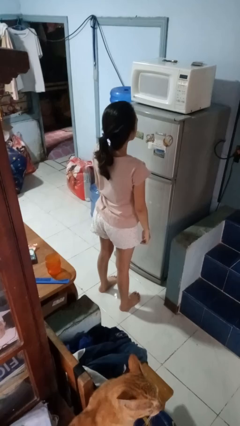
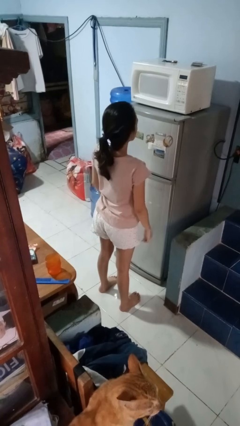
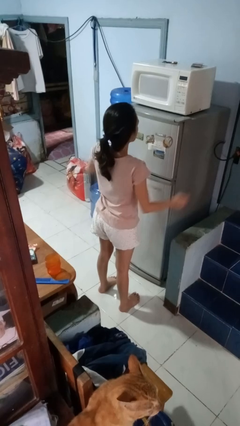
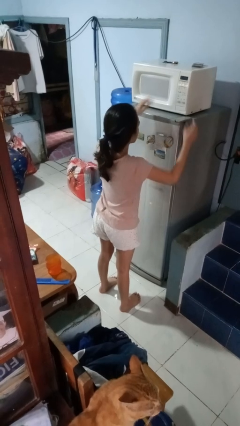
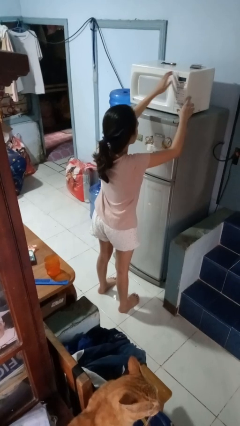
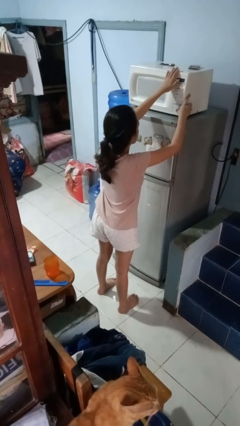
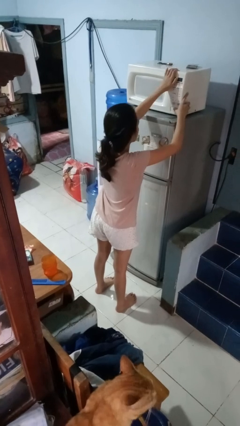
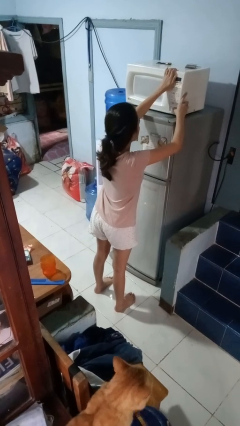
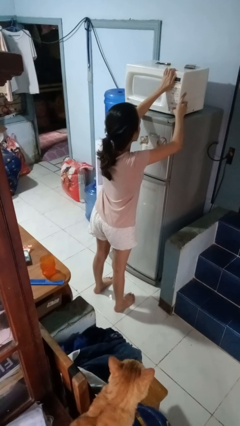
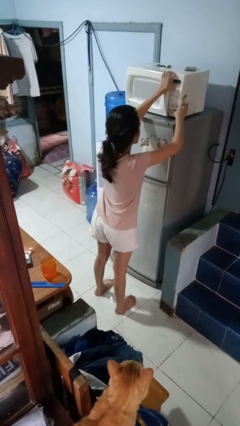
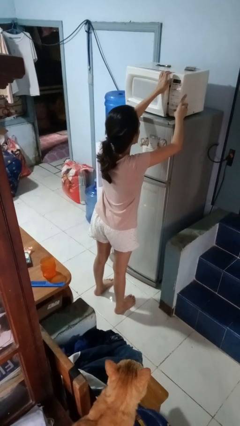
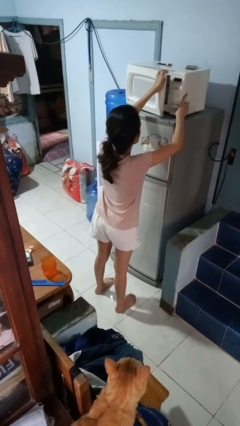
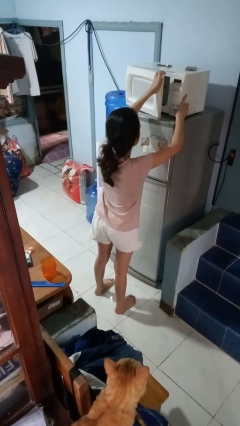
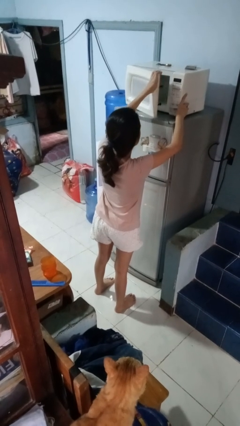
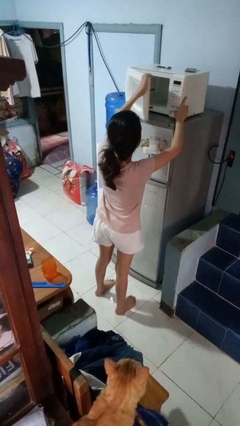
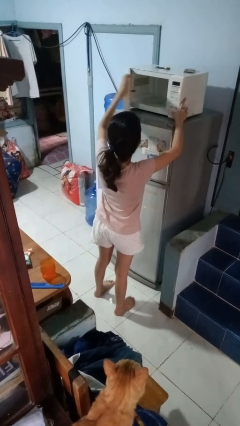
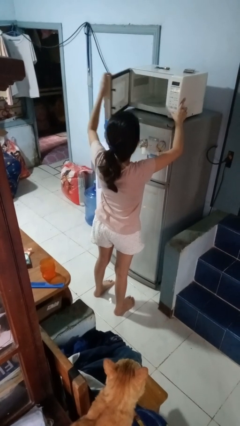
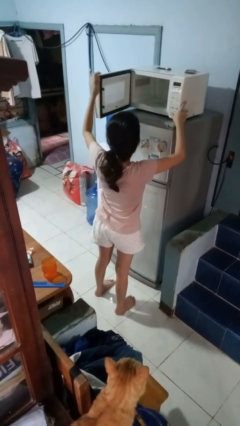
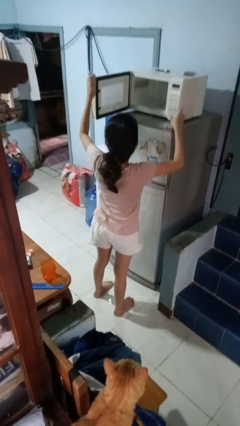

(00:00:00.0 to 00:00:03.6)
person opens microwave

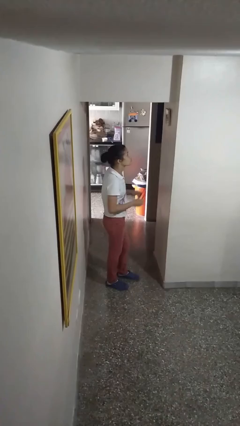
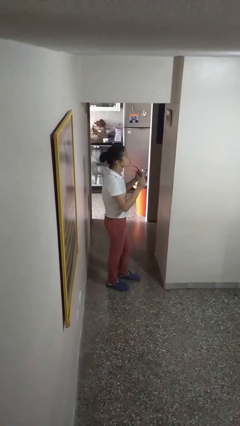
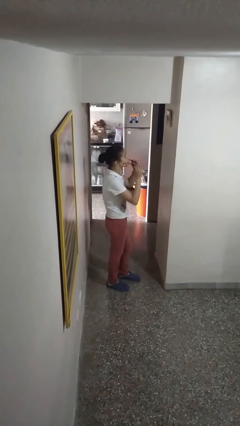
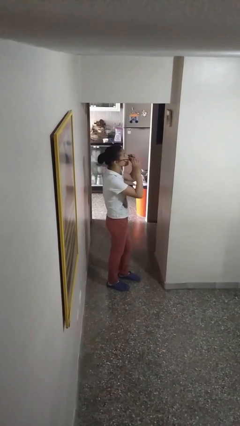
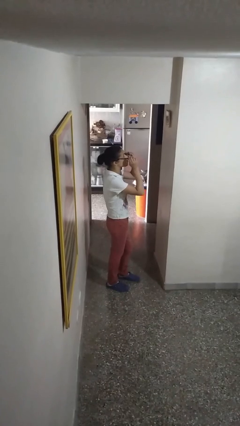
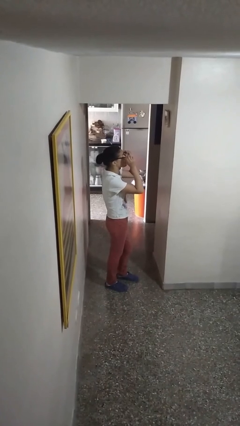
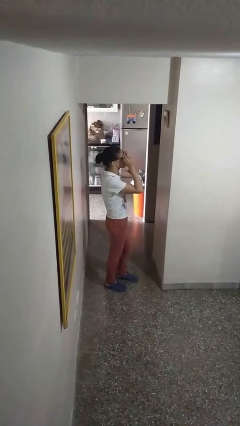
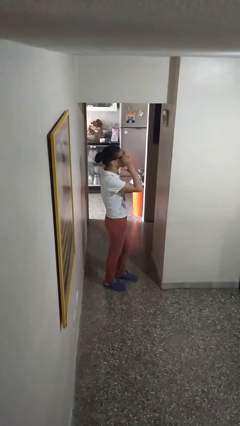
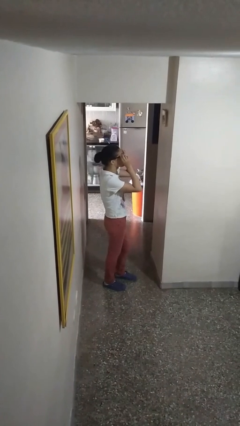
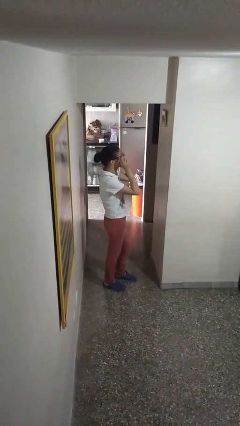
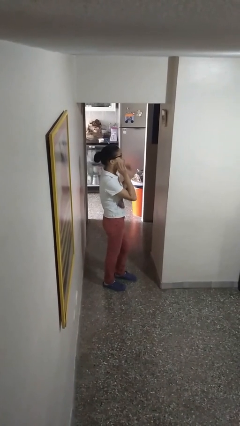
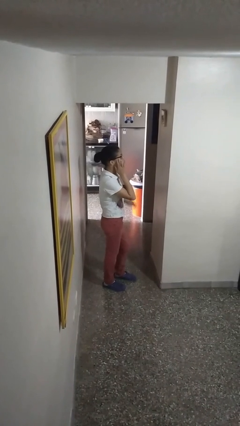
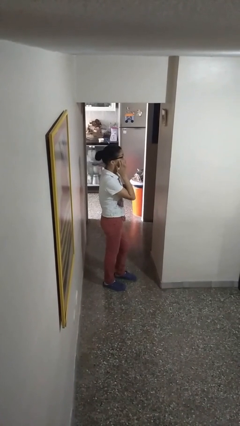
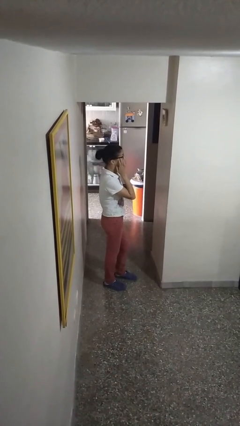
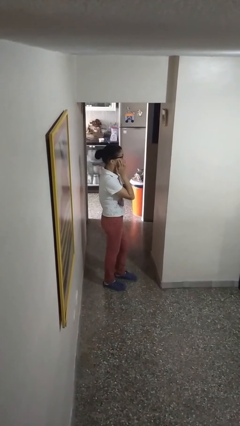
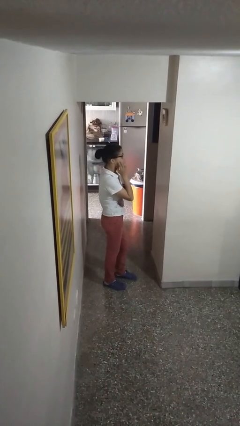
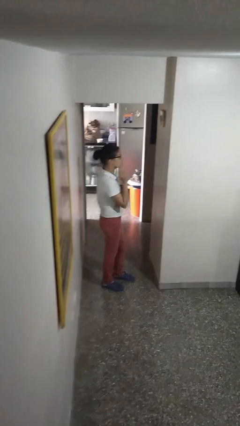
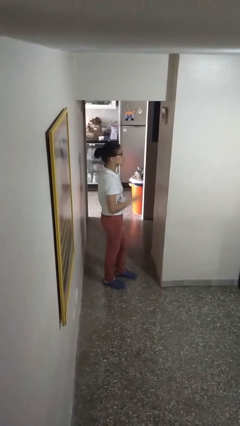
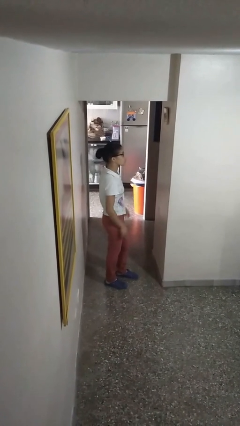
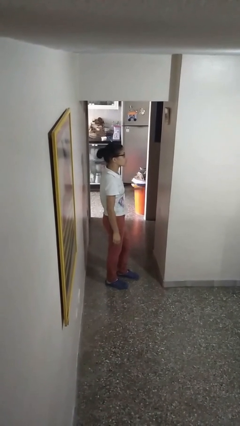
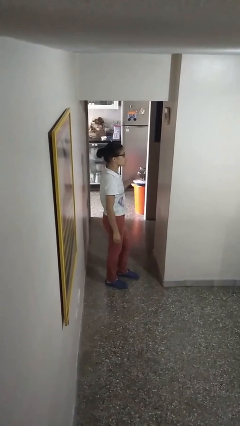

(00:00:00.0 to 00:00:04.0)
person puts on glasses

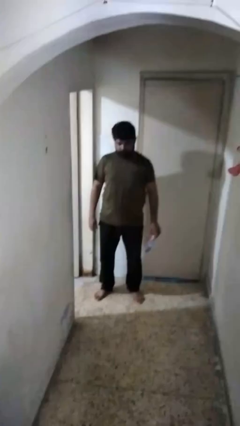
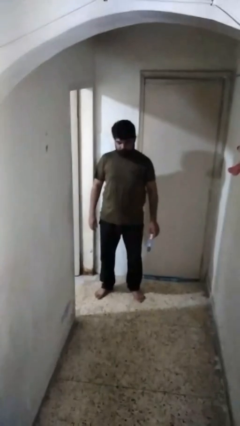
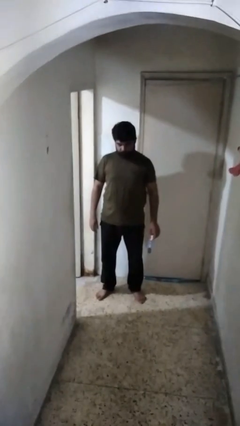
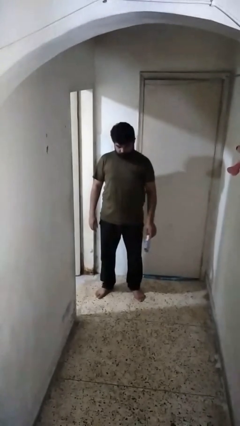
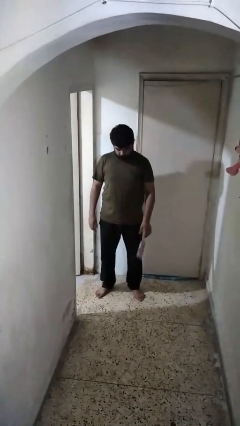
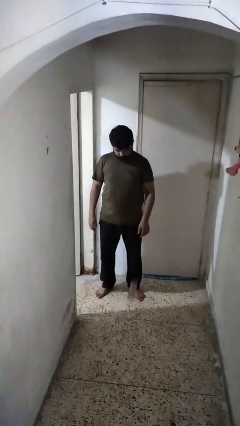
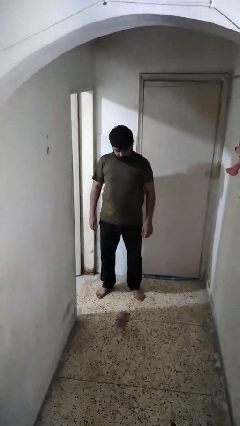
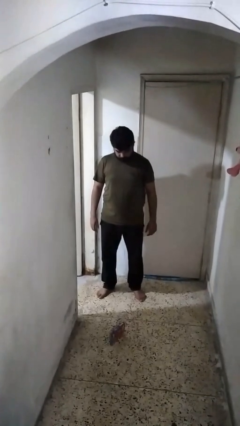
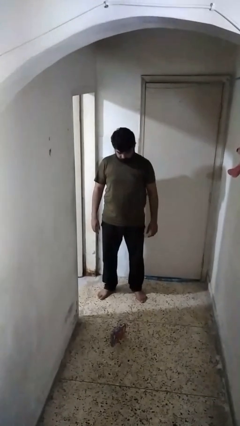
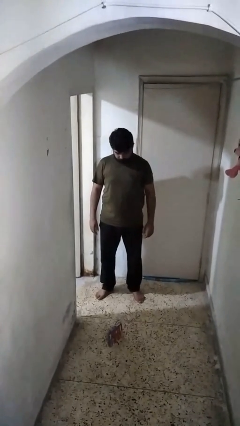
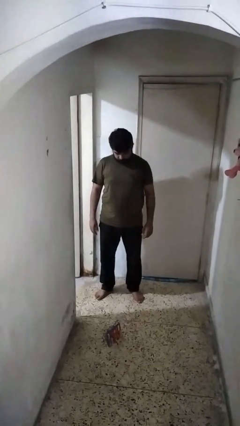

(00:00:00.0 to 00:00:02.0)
person throws object to ground

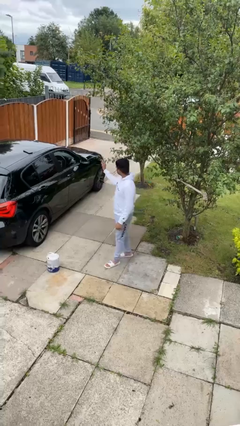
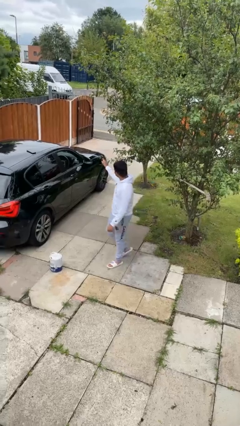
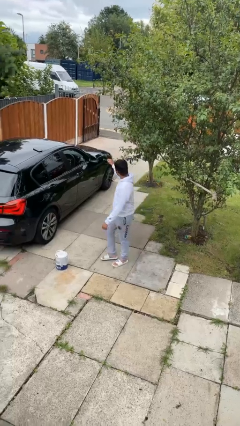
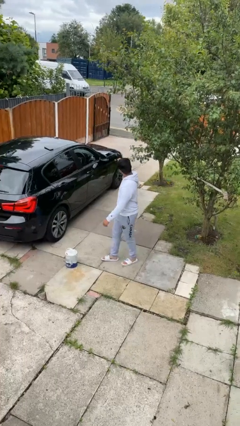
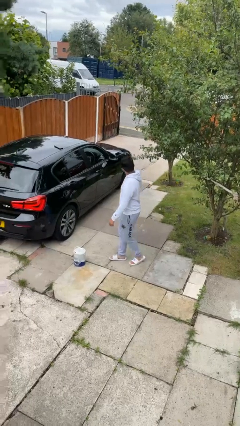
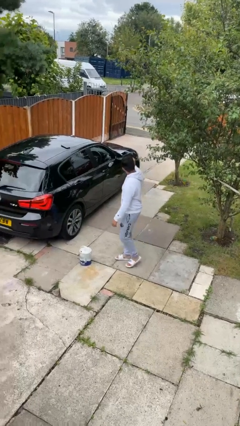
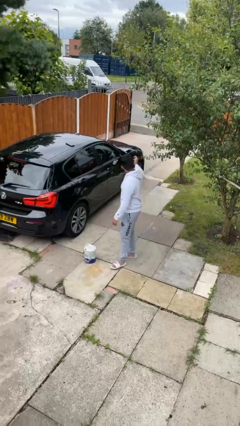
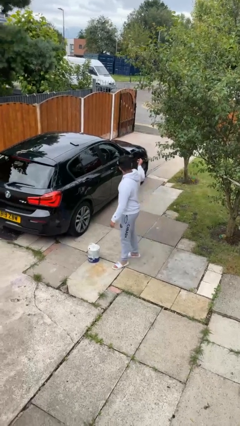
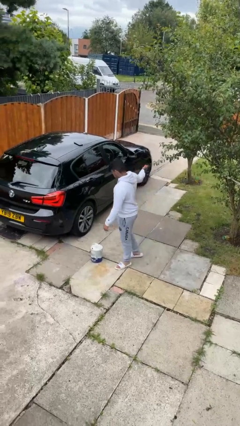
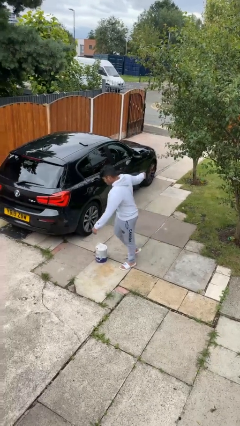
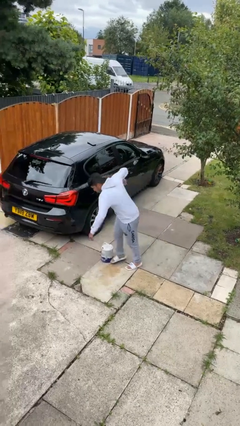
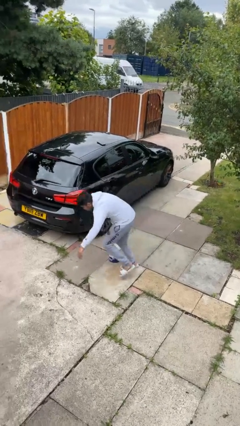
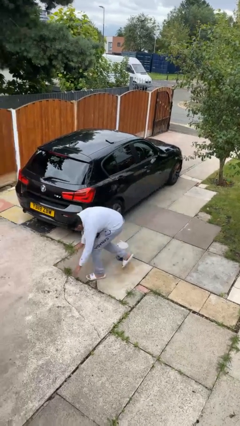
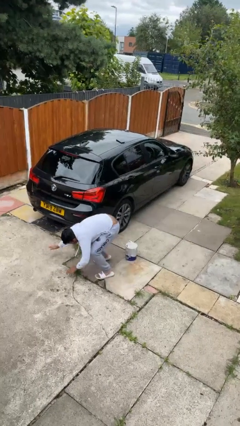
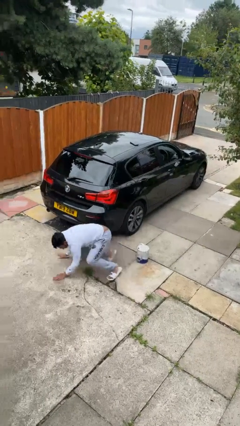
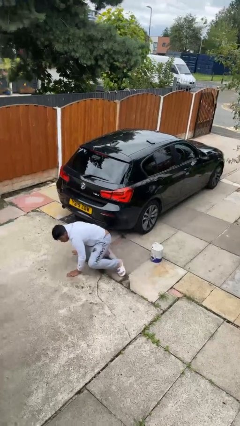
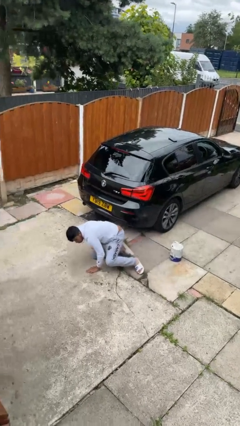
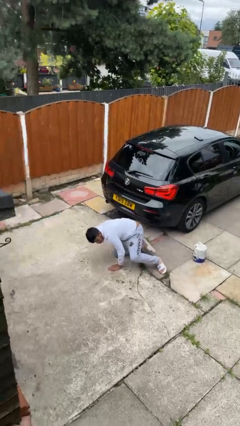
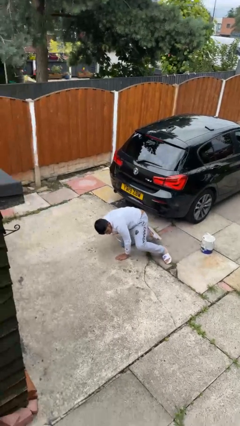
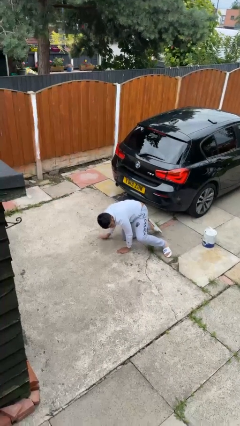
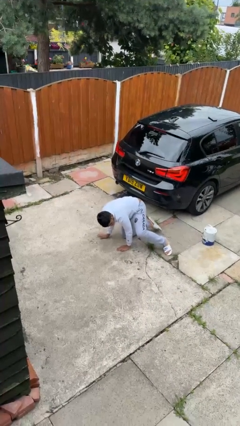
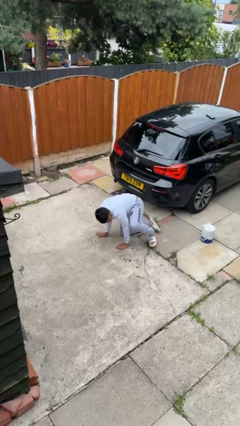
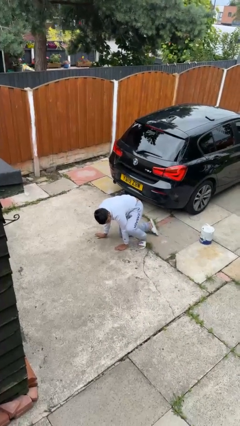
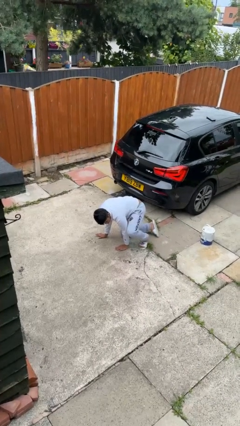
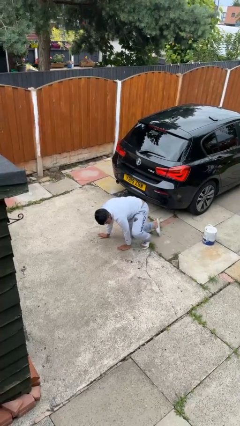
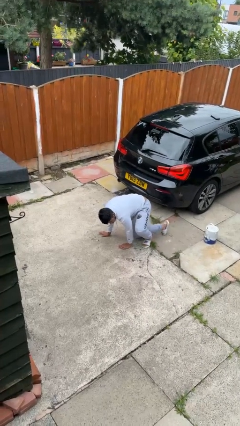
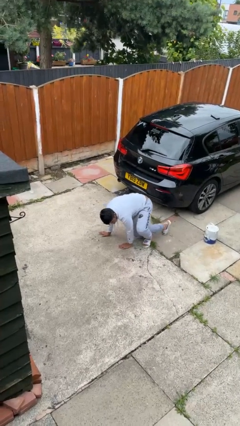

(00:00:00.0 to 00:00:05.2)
person trips on object on floor

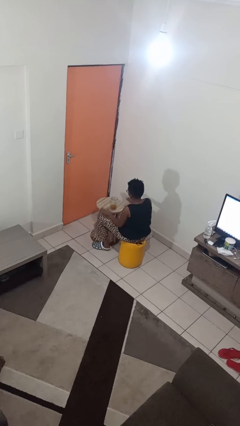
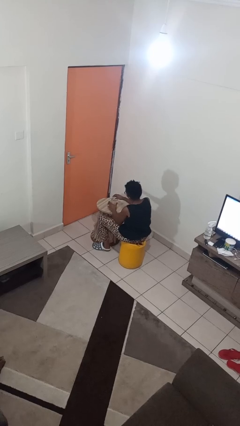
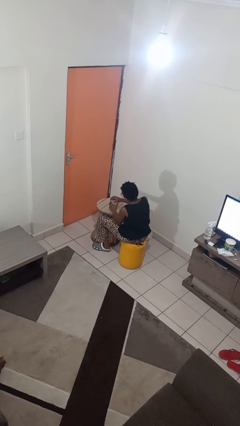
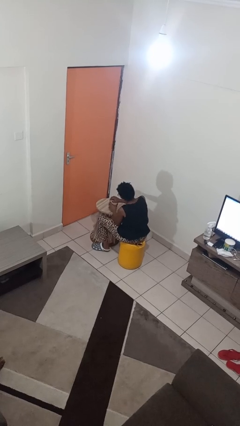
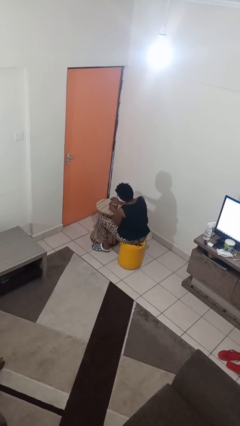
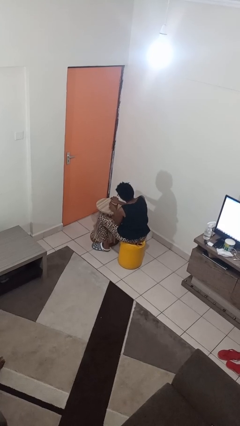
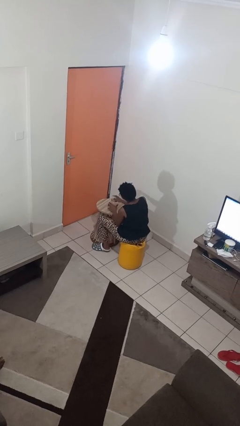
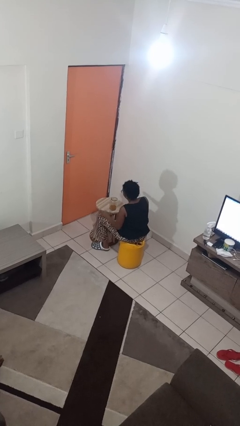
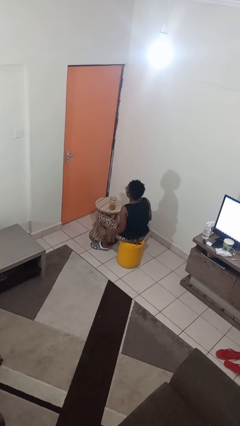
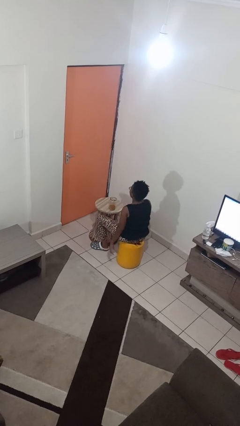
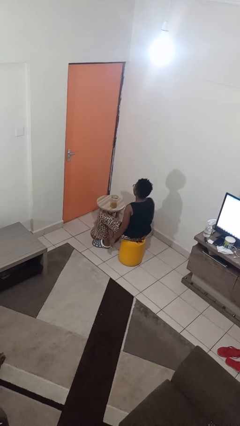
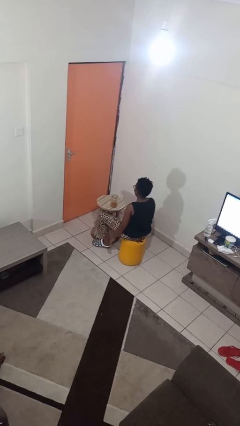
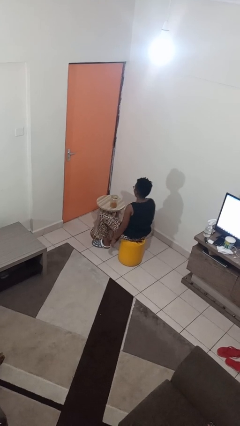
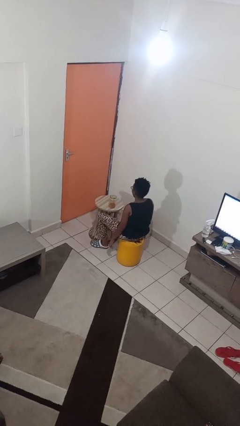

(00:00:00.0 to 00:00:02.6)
person closes jar
